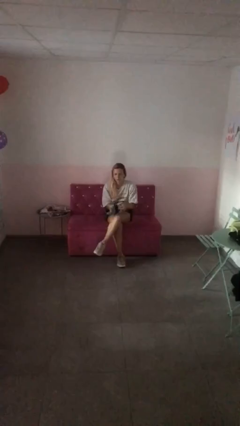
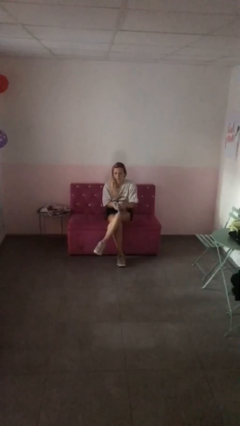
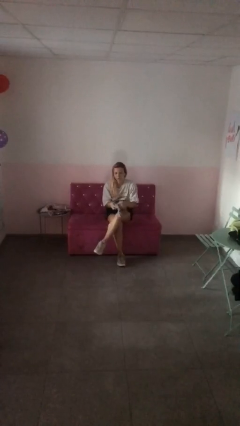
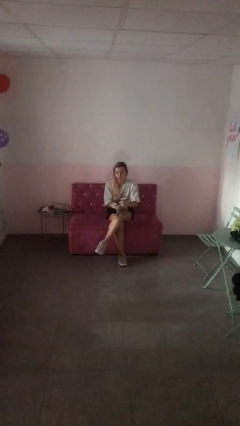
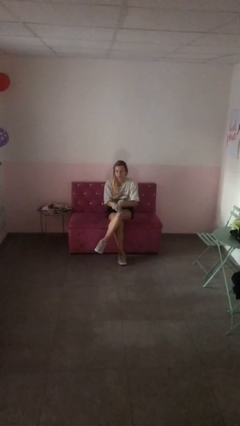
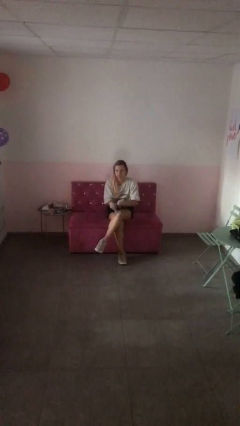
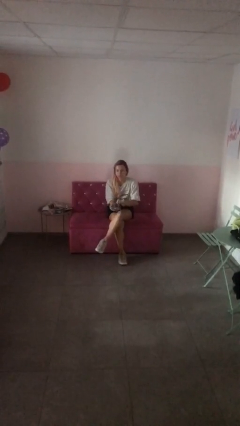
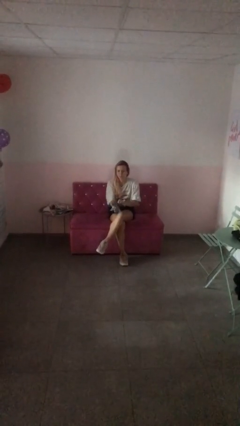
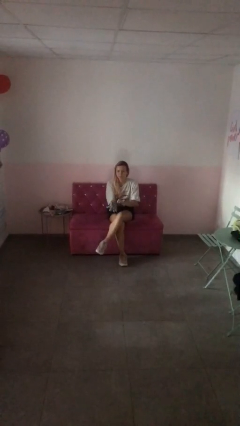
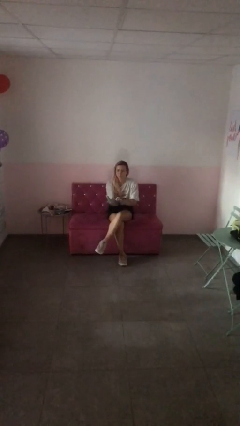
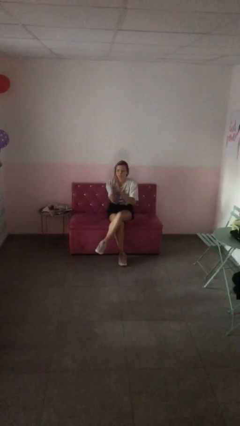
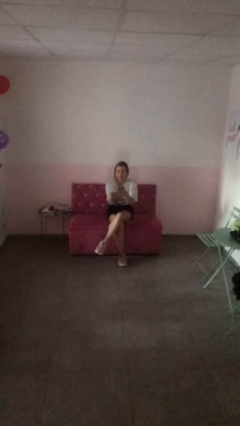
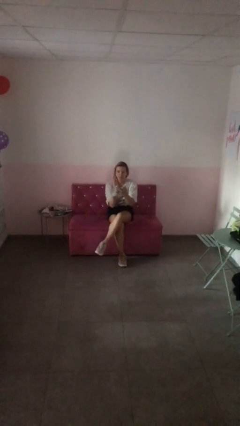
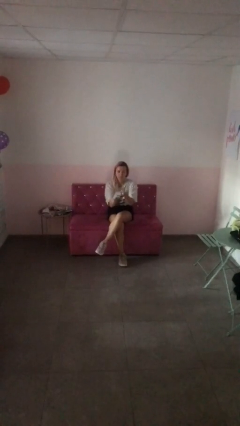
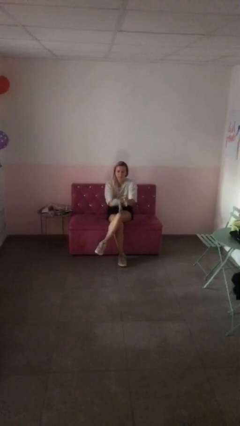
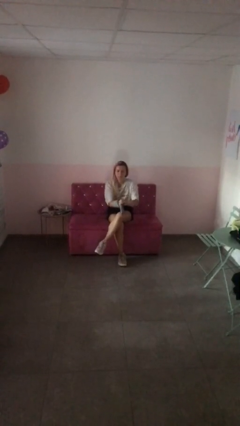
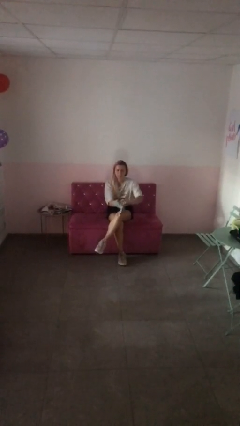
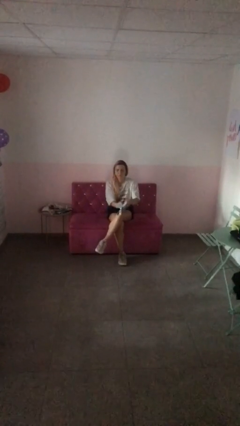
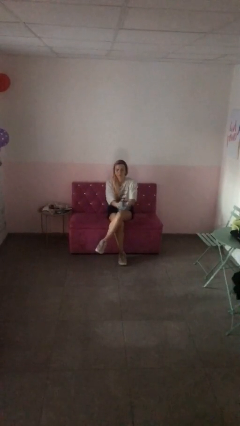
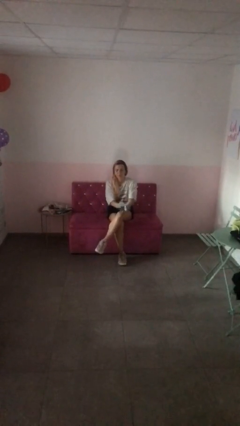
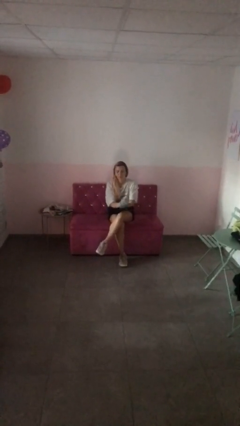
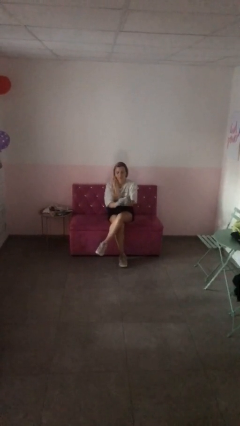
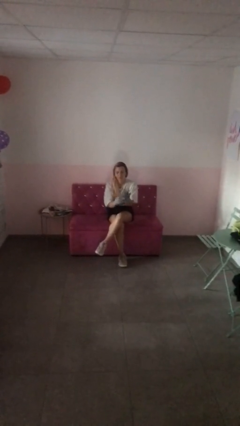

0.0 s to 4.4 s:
person puts on gloves

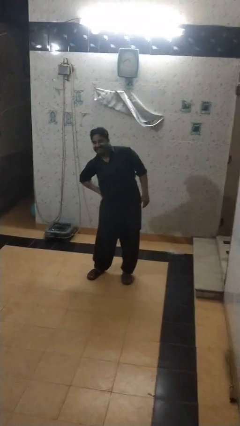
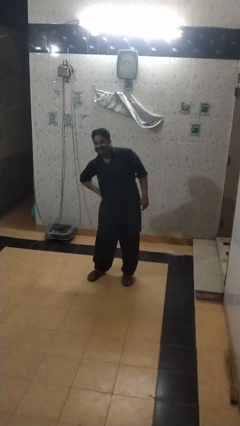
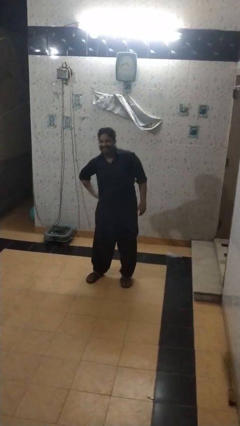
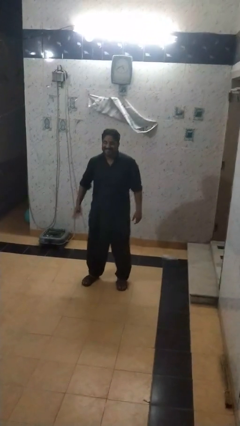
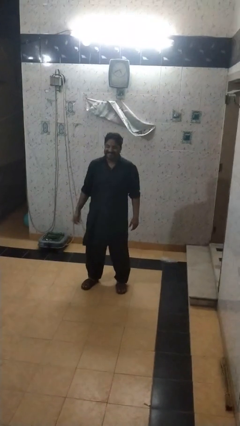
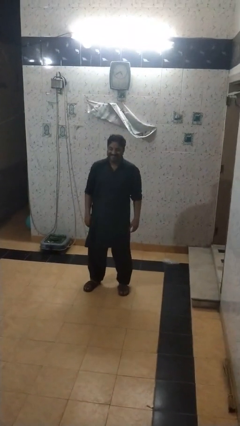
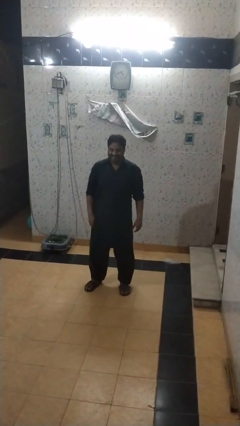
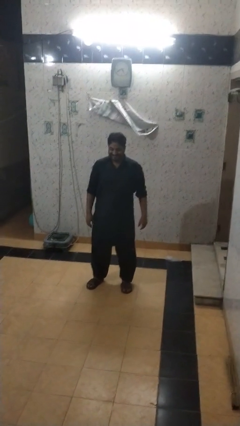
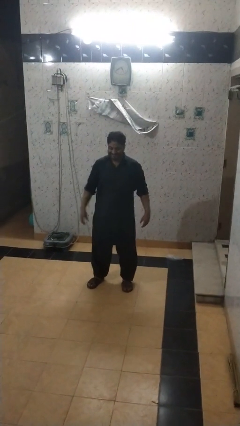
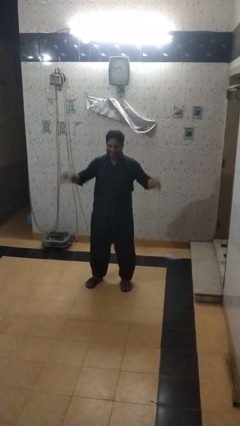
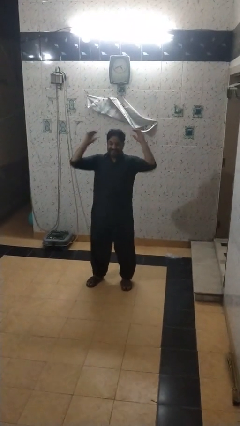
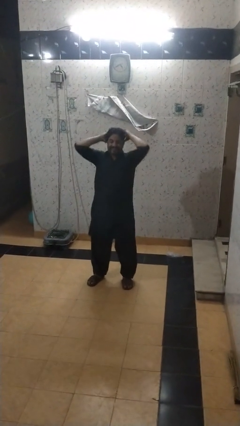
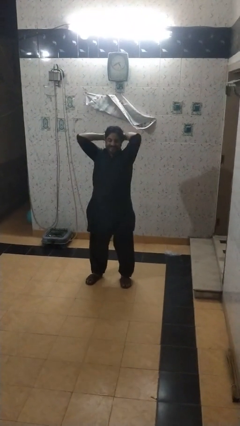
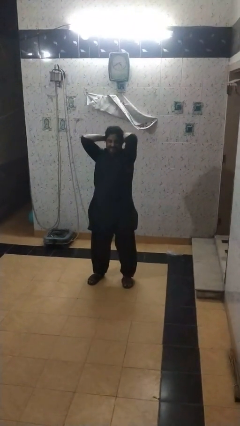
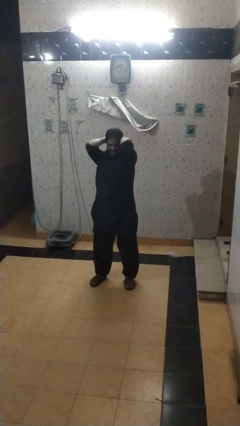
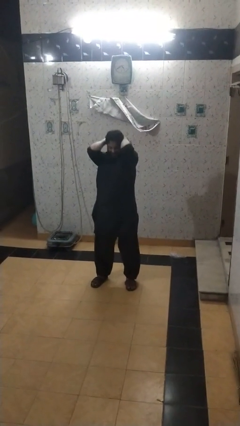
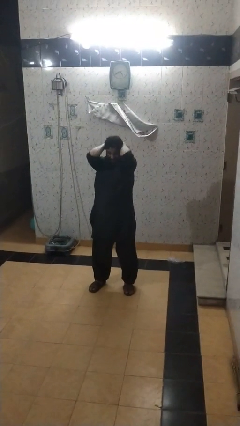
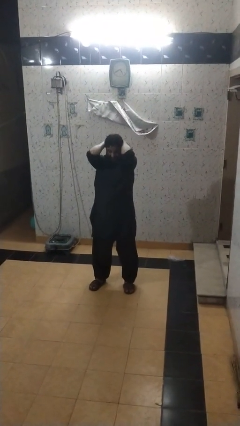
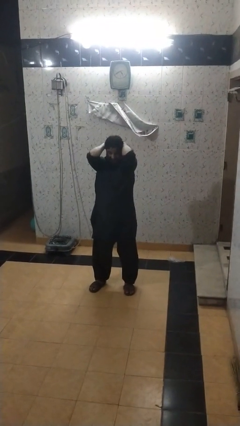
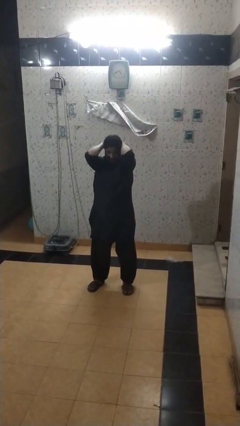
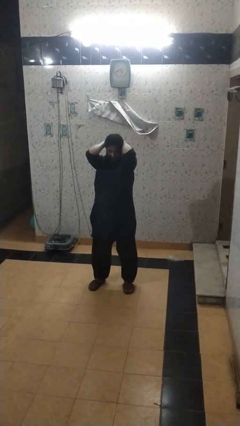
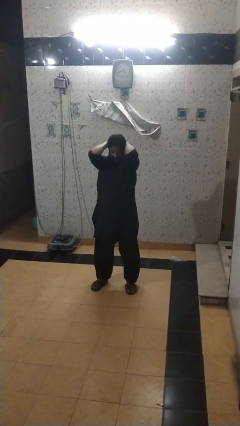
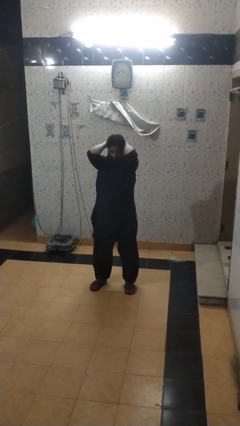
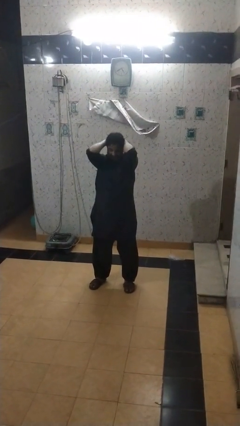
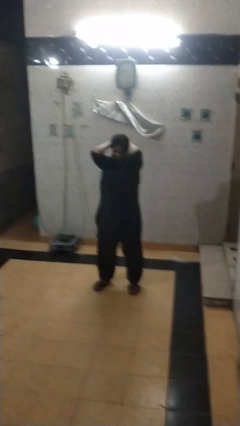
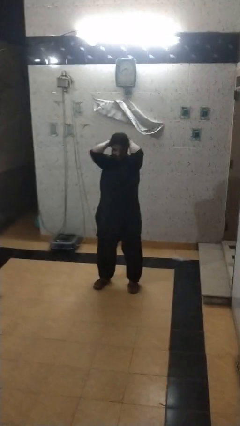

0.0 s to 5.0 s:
person stretches arms over head

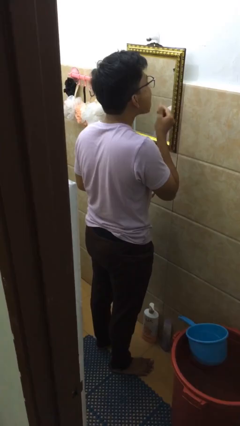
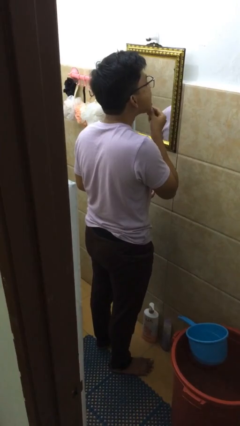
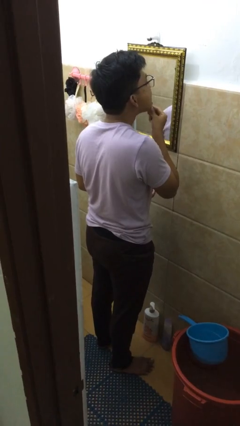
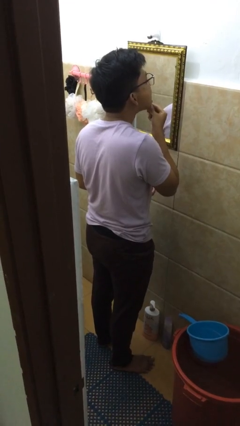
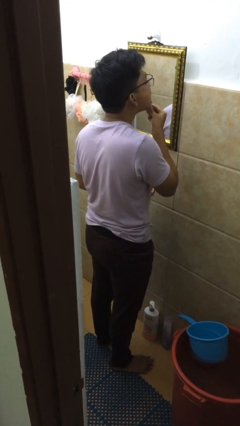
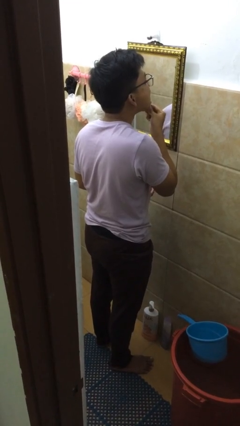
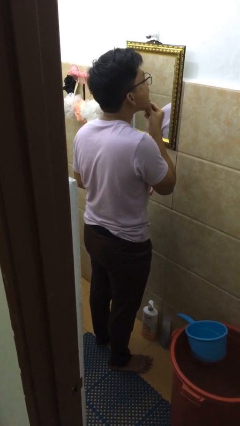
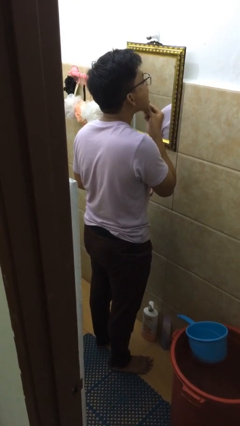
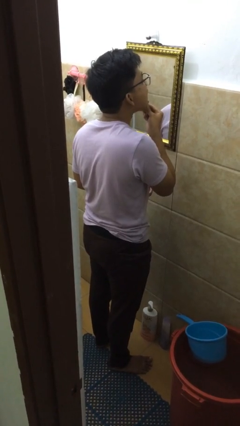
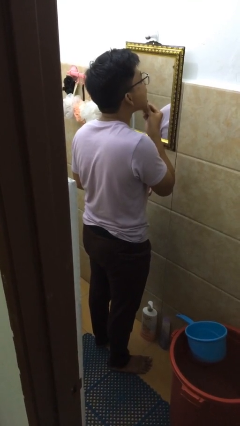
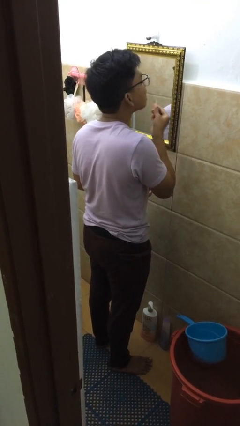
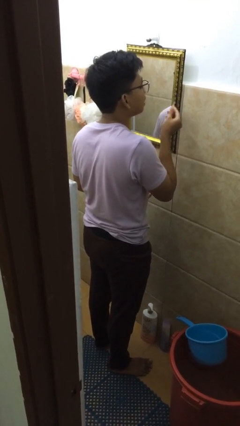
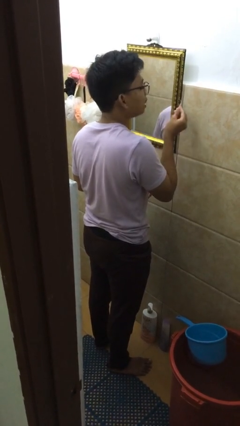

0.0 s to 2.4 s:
person flosses

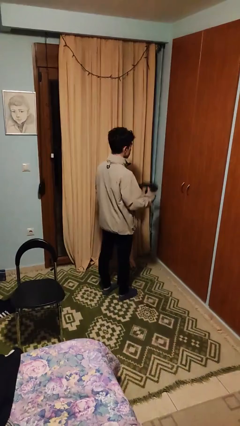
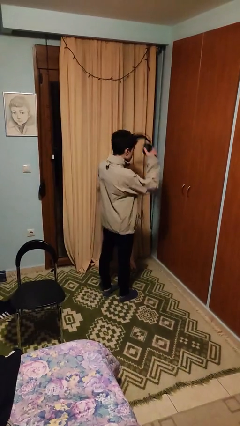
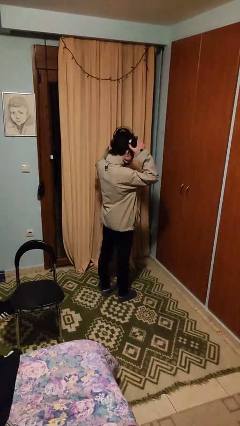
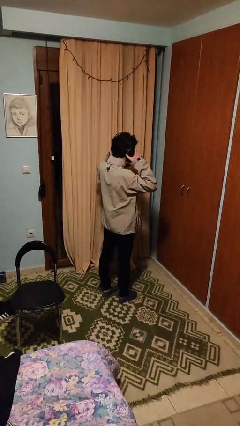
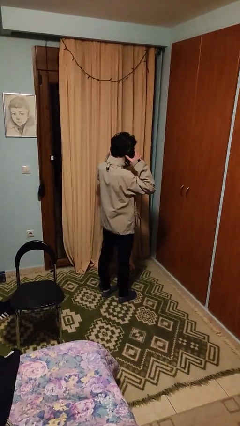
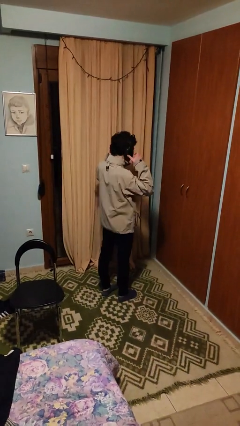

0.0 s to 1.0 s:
person puts on headphones

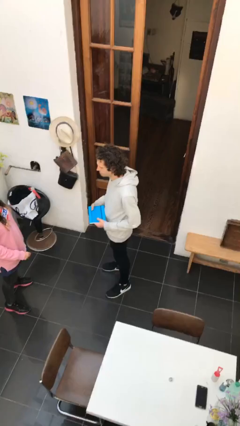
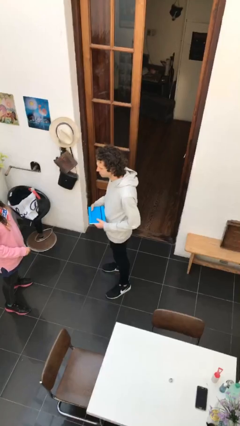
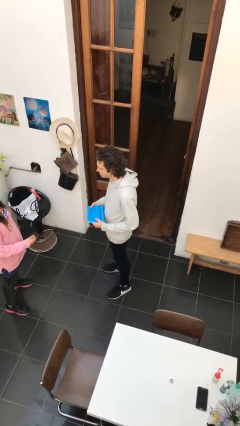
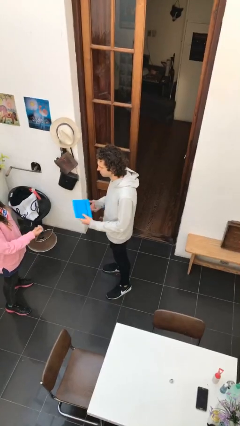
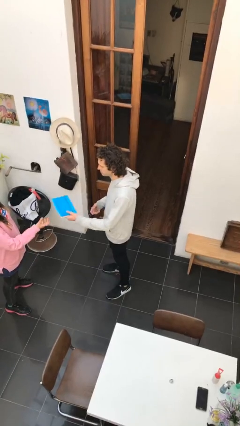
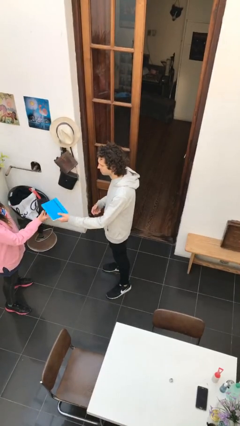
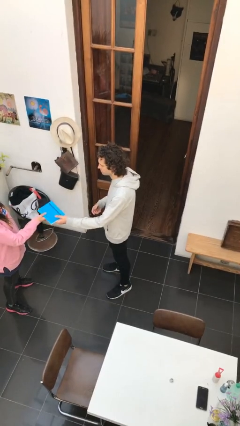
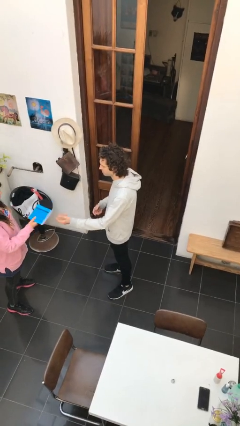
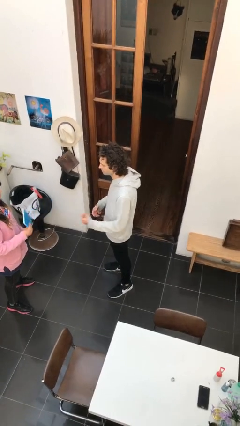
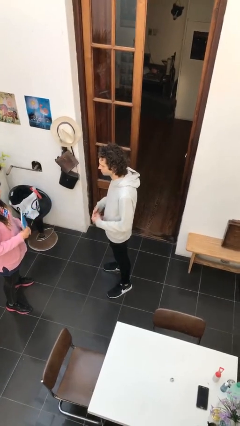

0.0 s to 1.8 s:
person transfers object to person

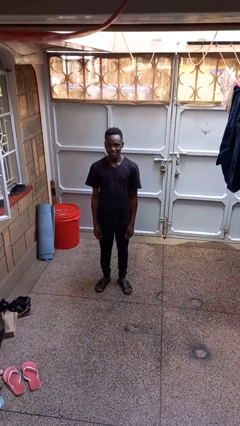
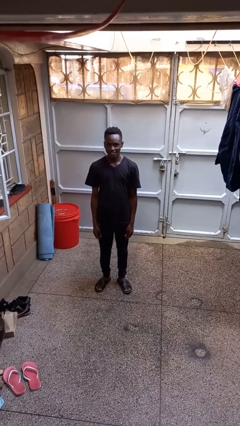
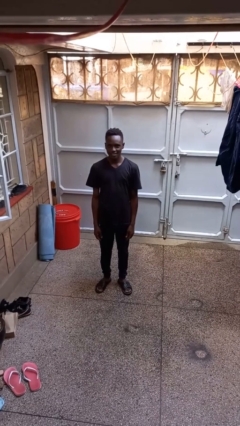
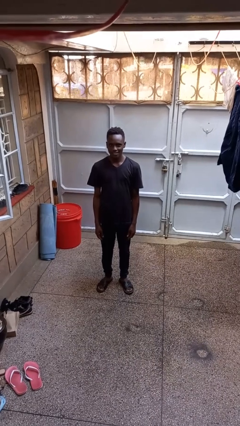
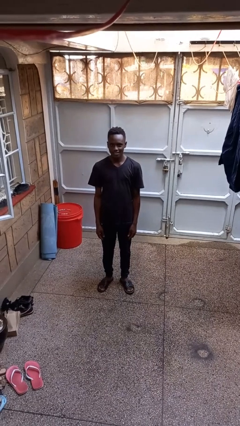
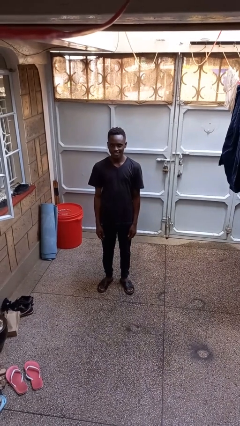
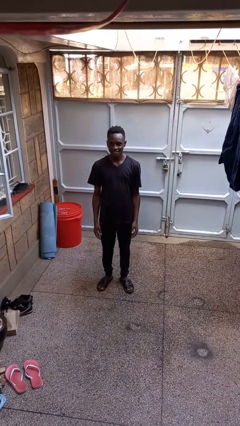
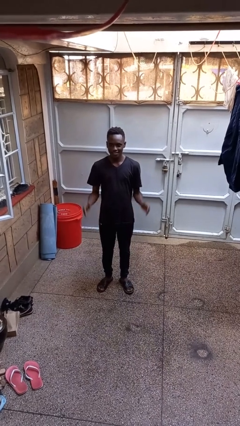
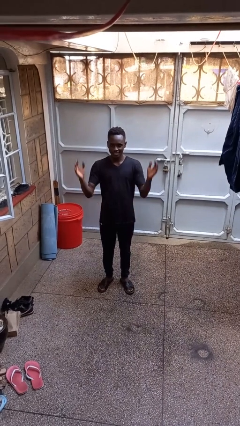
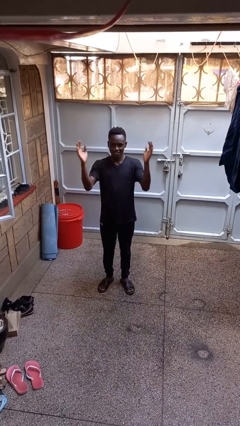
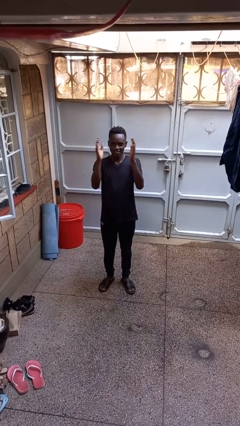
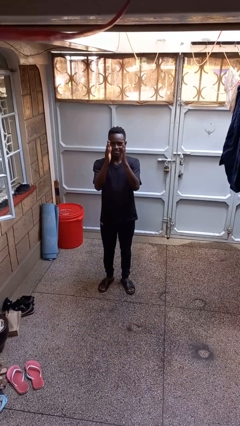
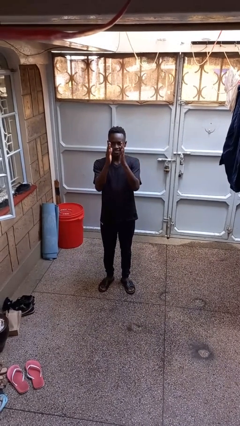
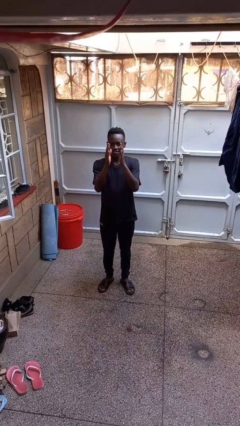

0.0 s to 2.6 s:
person gestures zoom in
